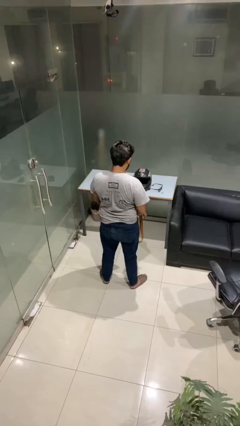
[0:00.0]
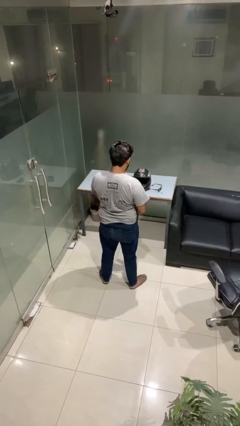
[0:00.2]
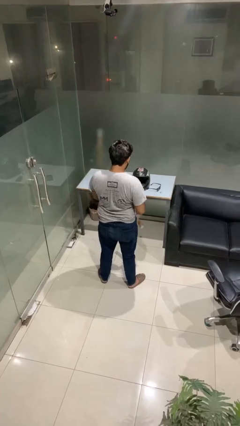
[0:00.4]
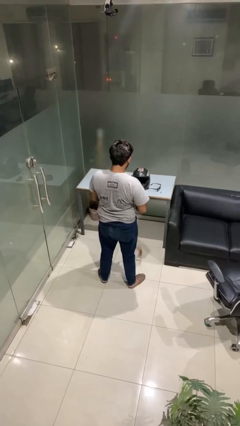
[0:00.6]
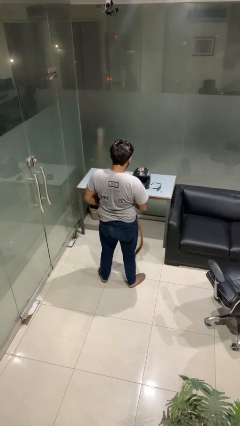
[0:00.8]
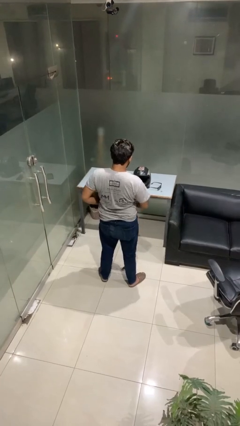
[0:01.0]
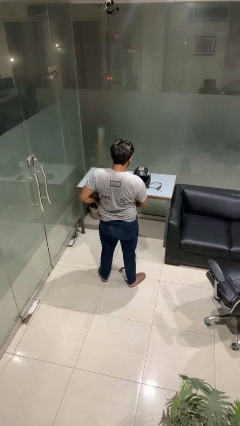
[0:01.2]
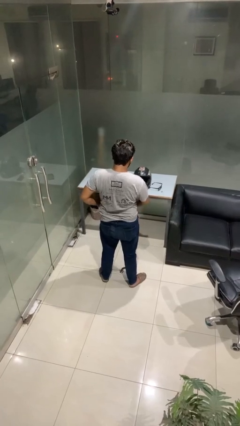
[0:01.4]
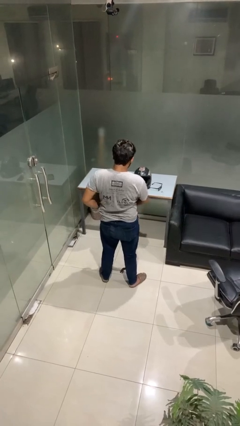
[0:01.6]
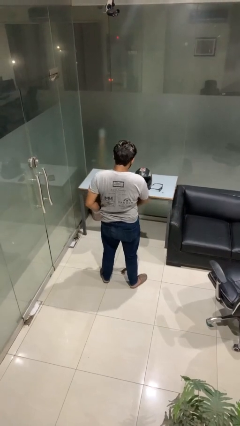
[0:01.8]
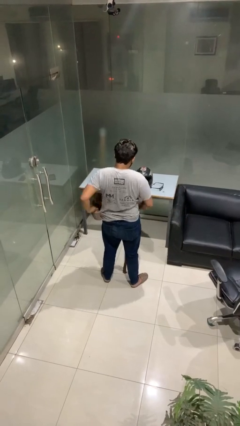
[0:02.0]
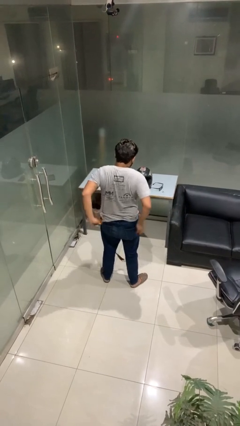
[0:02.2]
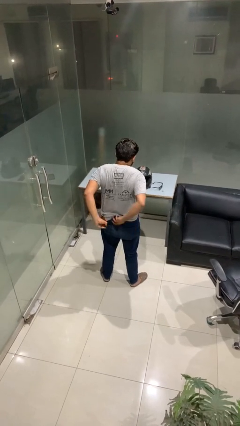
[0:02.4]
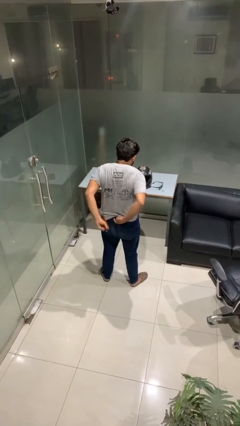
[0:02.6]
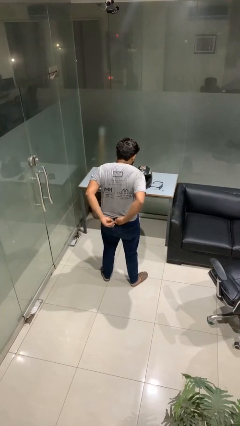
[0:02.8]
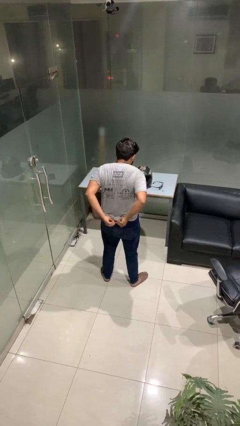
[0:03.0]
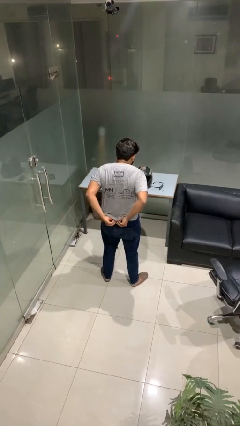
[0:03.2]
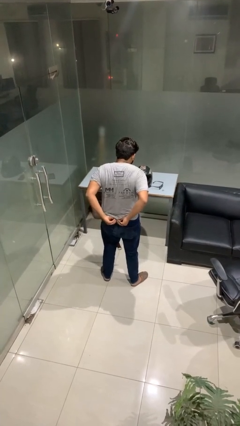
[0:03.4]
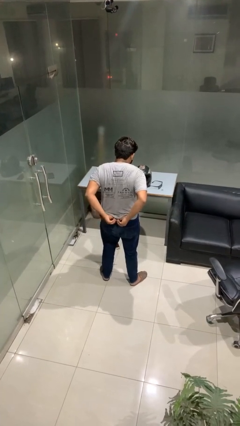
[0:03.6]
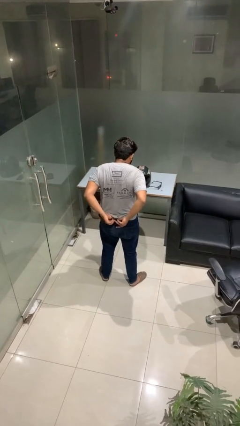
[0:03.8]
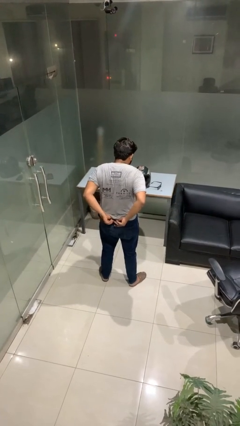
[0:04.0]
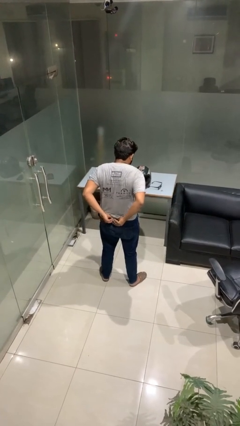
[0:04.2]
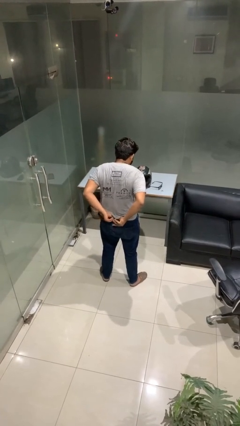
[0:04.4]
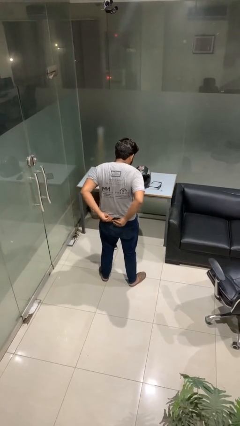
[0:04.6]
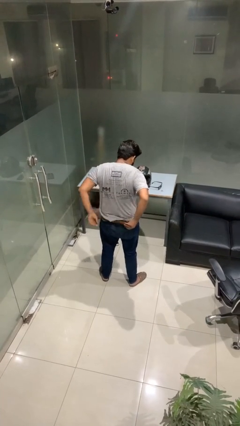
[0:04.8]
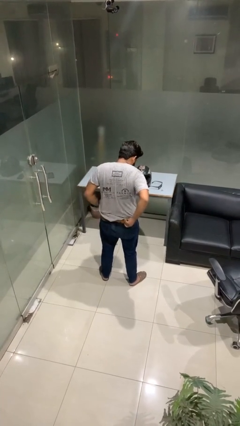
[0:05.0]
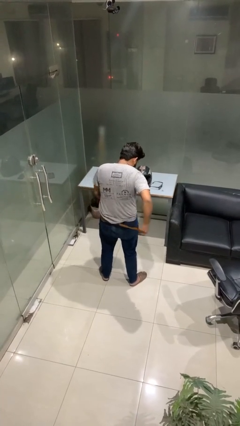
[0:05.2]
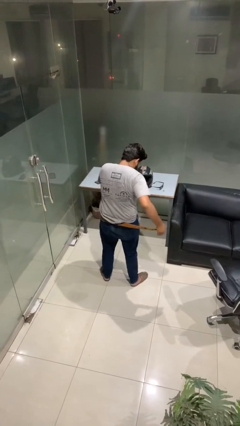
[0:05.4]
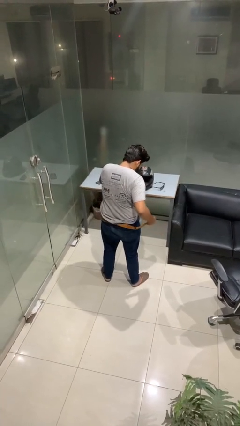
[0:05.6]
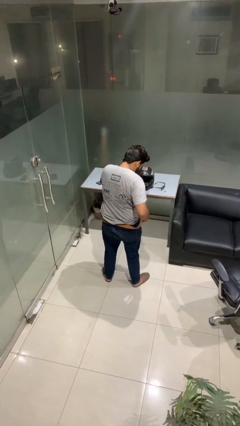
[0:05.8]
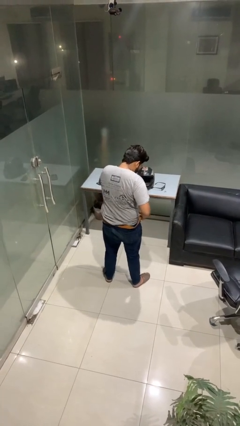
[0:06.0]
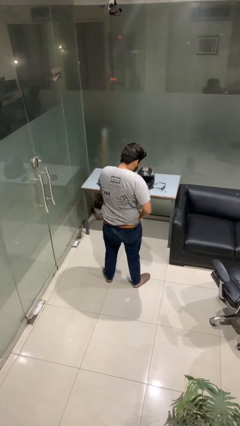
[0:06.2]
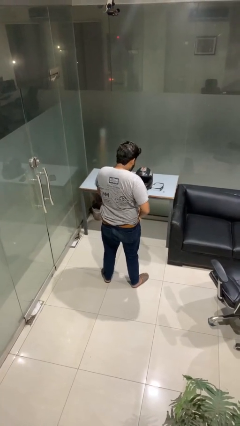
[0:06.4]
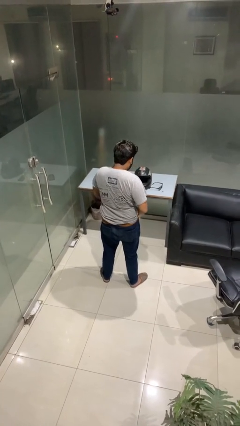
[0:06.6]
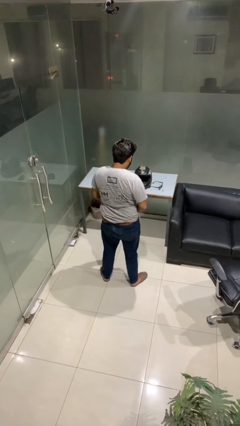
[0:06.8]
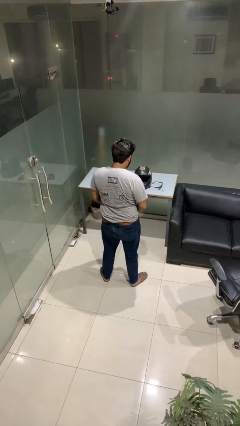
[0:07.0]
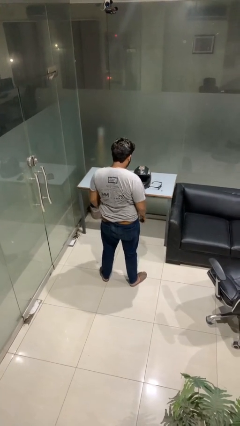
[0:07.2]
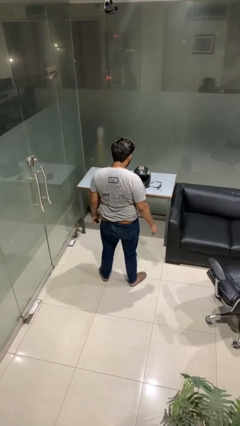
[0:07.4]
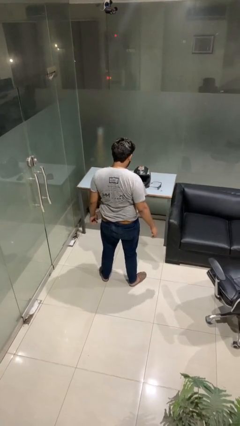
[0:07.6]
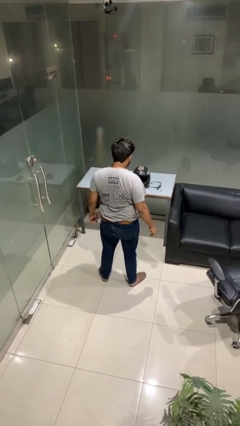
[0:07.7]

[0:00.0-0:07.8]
person puts on belt

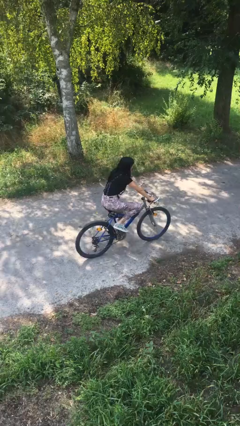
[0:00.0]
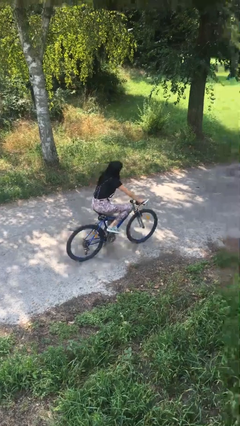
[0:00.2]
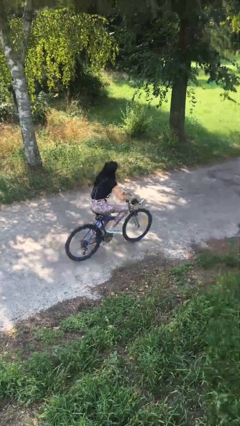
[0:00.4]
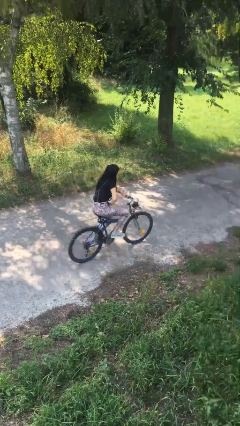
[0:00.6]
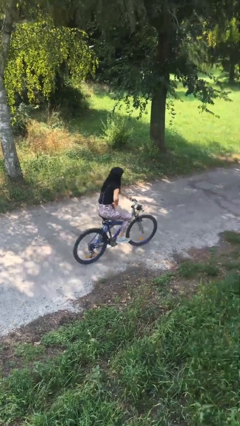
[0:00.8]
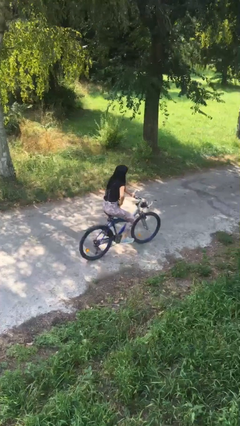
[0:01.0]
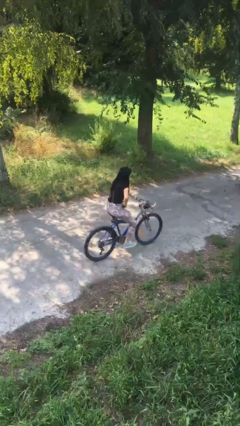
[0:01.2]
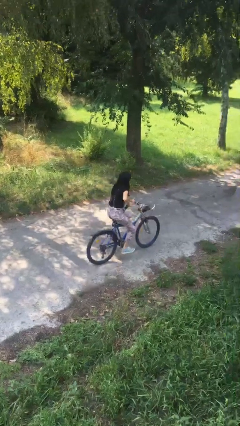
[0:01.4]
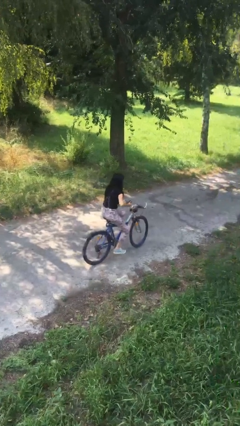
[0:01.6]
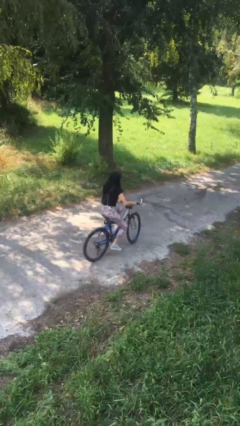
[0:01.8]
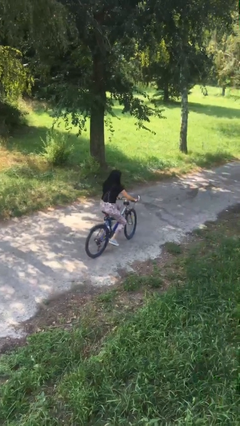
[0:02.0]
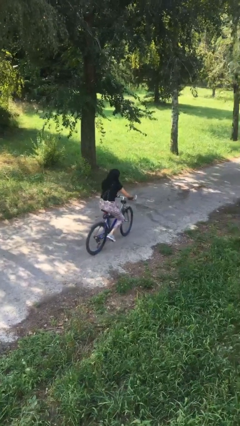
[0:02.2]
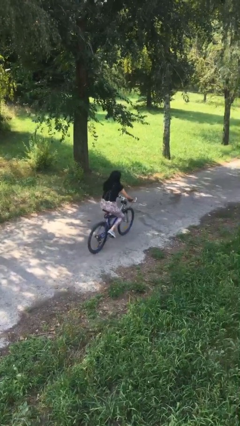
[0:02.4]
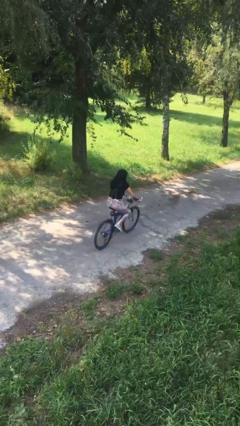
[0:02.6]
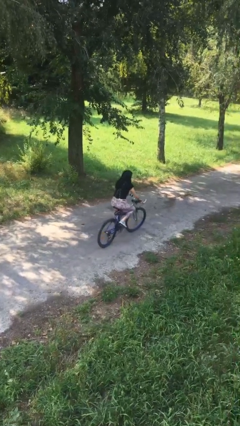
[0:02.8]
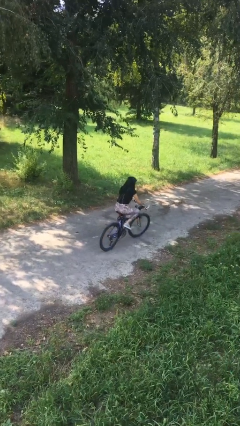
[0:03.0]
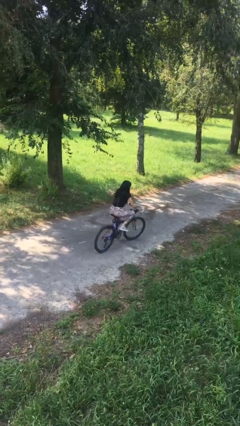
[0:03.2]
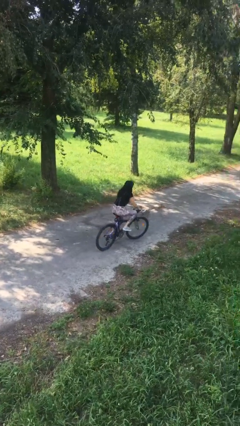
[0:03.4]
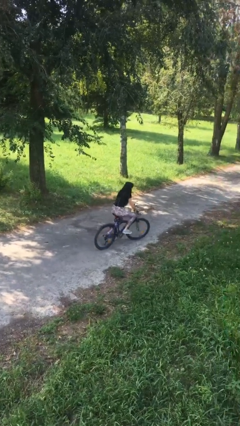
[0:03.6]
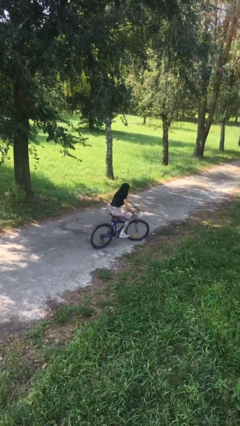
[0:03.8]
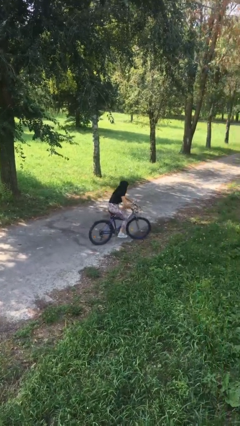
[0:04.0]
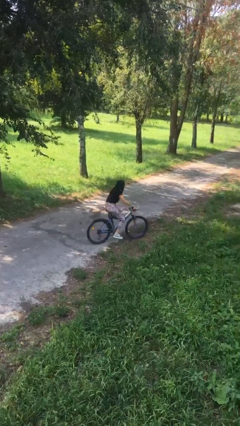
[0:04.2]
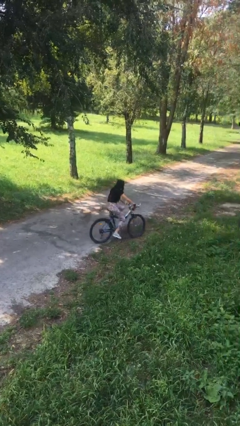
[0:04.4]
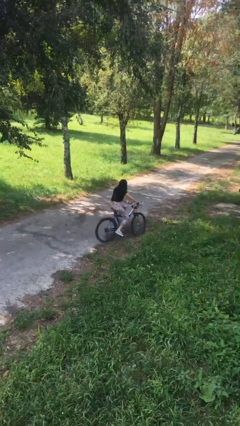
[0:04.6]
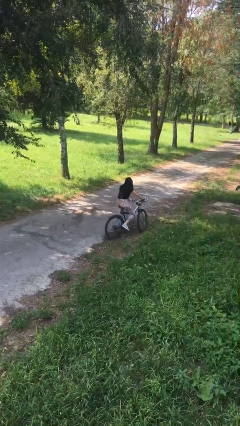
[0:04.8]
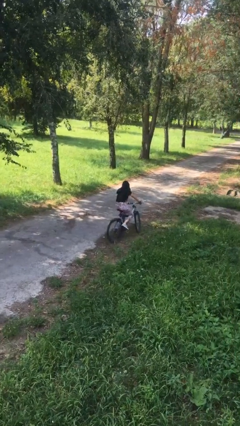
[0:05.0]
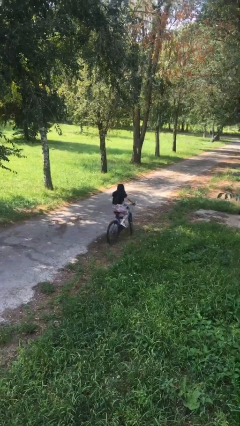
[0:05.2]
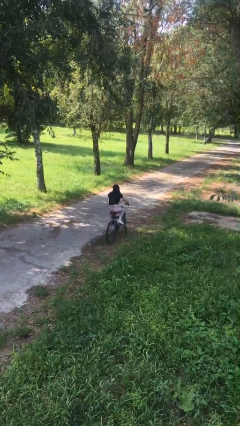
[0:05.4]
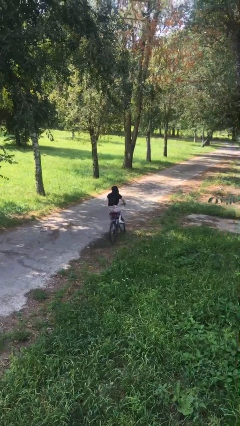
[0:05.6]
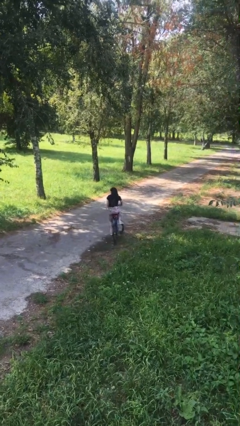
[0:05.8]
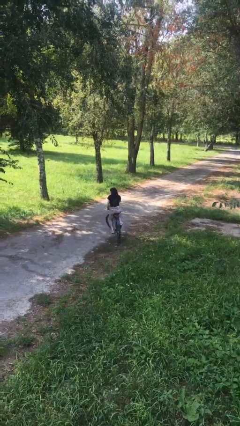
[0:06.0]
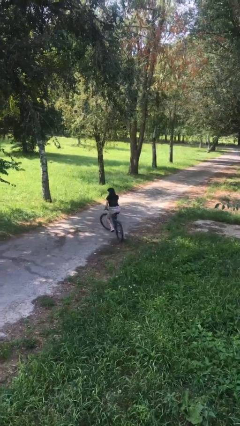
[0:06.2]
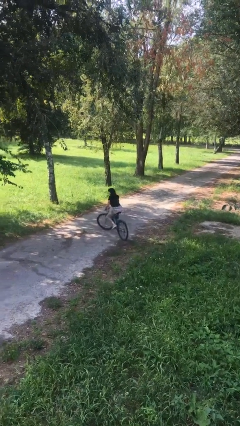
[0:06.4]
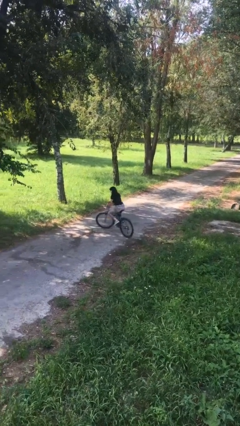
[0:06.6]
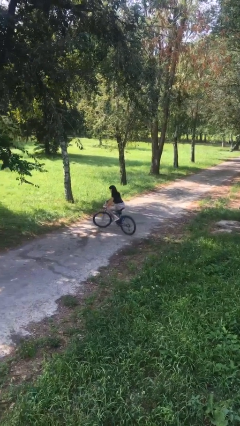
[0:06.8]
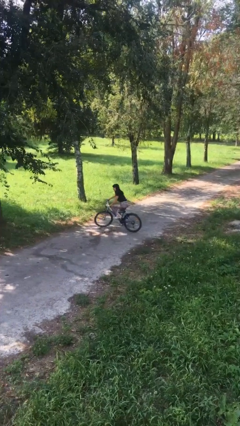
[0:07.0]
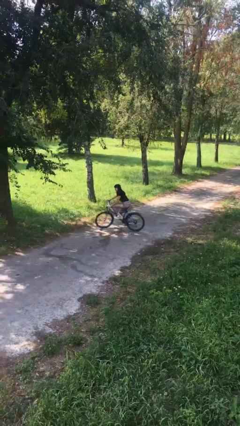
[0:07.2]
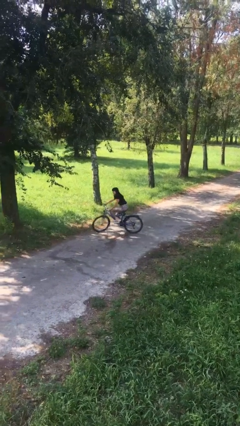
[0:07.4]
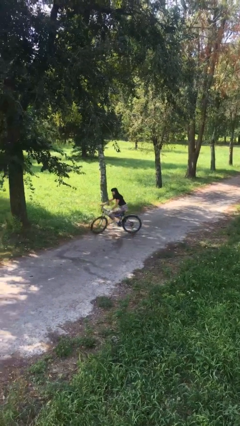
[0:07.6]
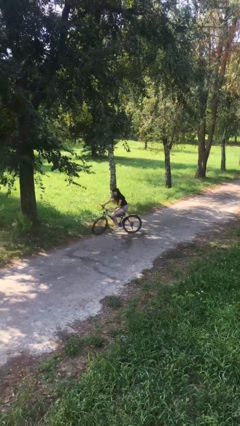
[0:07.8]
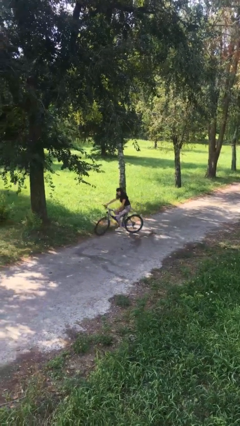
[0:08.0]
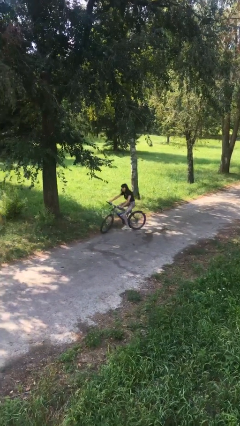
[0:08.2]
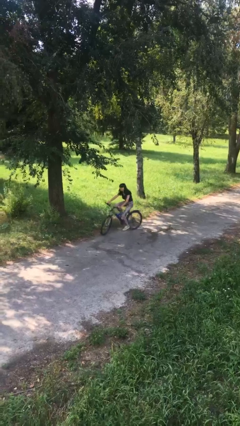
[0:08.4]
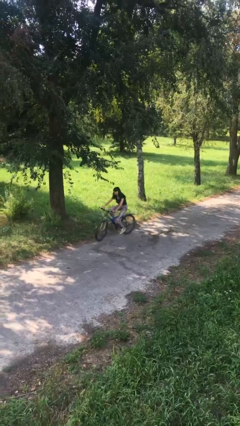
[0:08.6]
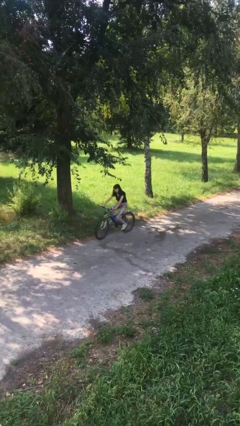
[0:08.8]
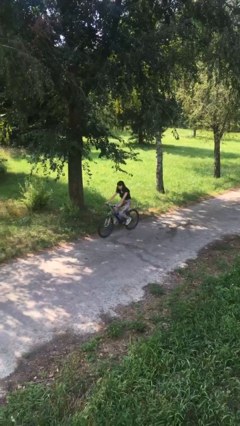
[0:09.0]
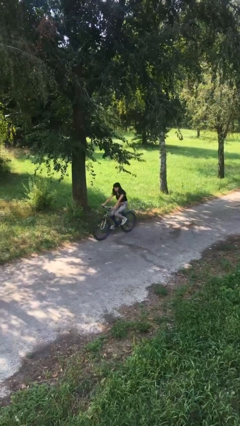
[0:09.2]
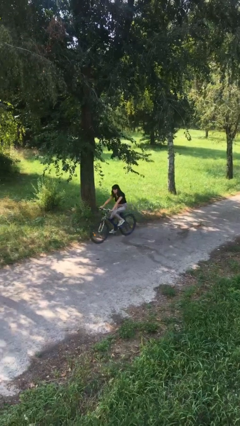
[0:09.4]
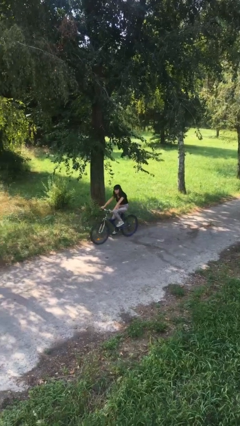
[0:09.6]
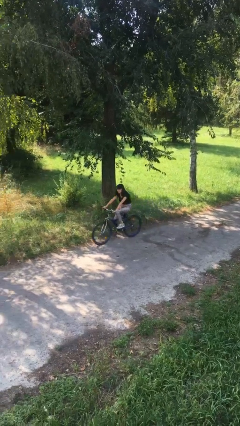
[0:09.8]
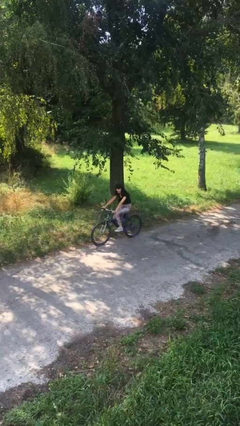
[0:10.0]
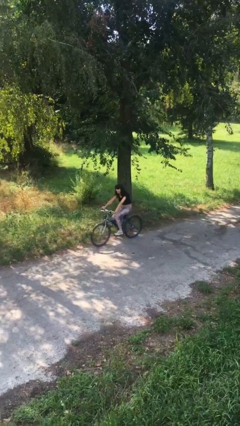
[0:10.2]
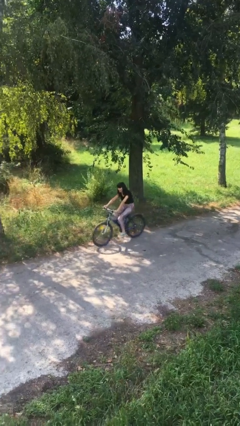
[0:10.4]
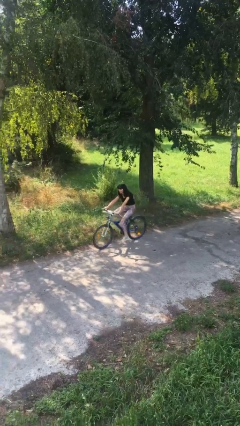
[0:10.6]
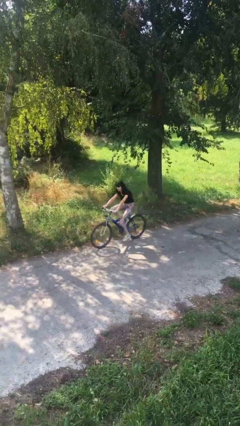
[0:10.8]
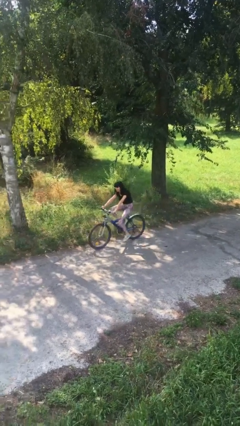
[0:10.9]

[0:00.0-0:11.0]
person rides bicycle
